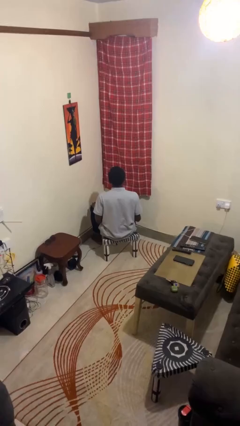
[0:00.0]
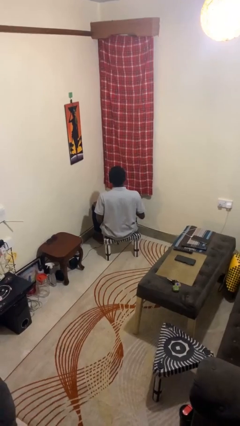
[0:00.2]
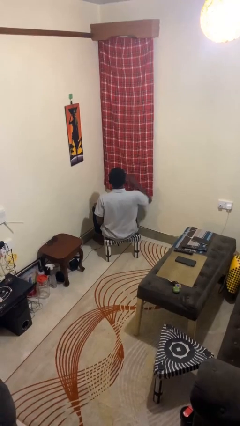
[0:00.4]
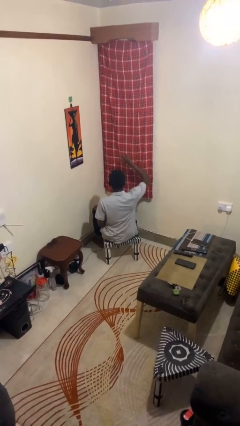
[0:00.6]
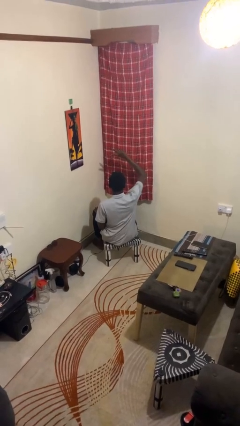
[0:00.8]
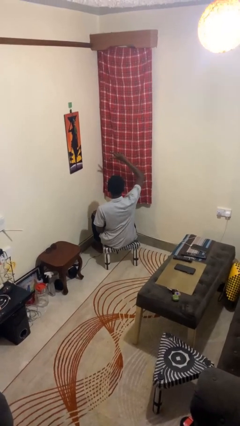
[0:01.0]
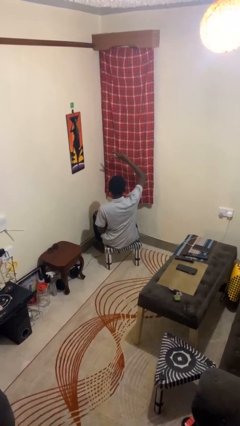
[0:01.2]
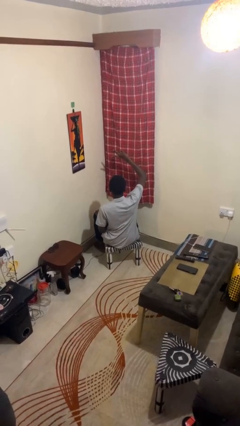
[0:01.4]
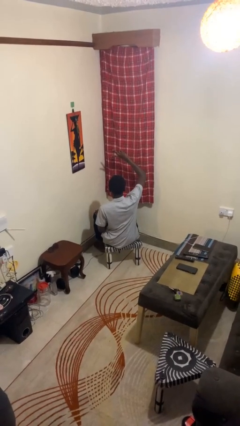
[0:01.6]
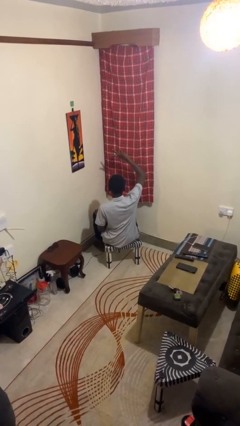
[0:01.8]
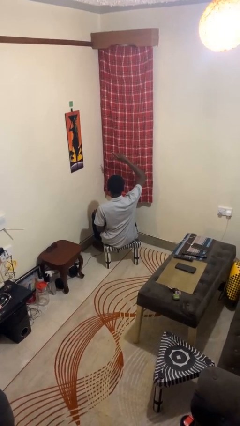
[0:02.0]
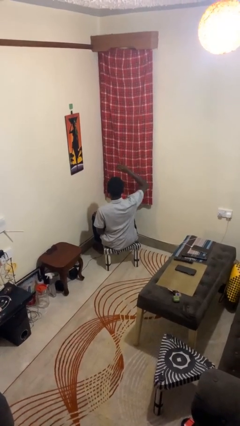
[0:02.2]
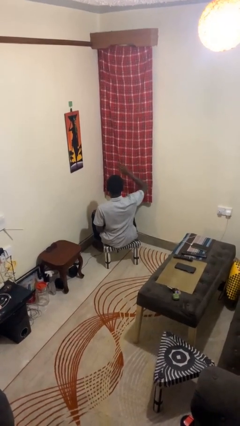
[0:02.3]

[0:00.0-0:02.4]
person gestures peace

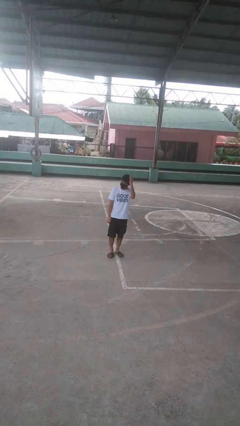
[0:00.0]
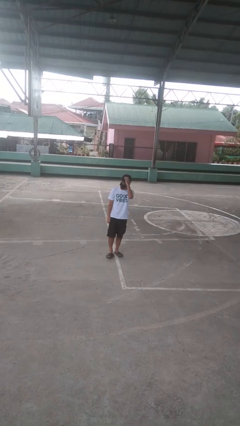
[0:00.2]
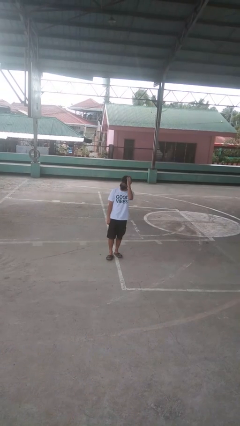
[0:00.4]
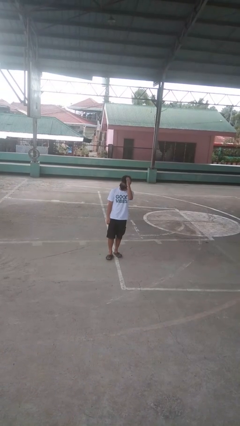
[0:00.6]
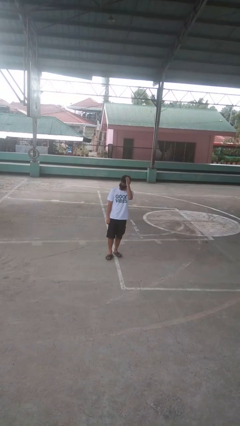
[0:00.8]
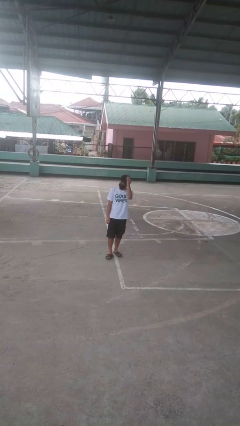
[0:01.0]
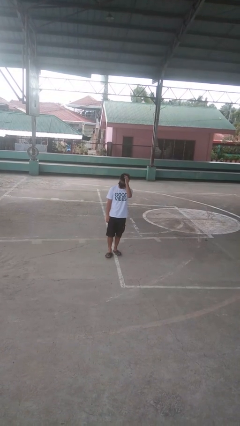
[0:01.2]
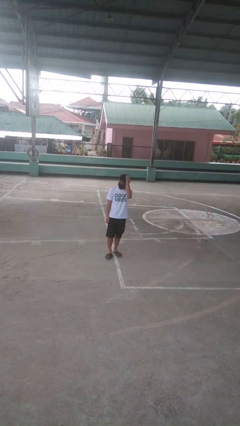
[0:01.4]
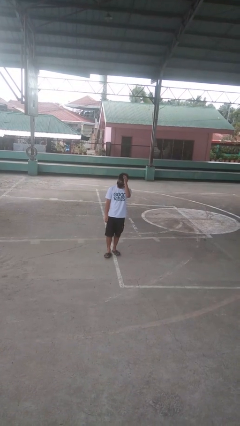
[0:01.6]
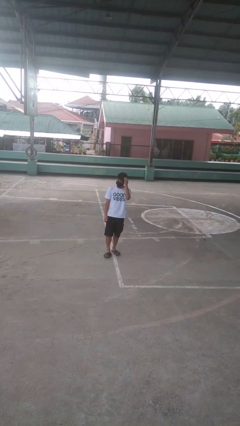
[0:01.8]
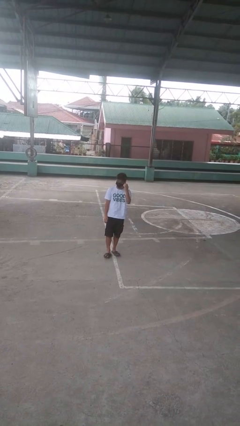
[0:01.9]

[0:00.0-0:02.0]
person pats head

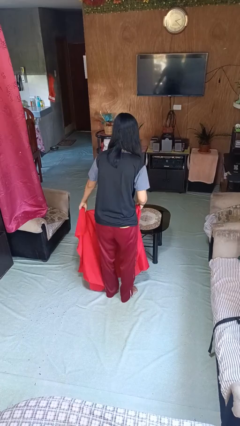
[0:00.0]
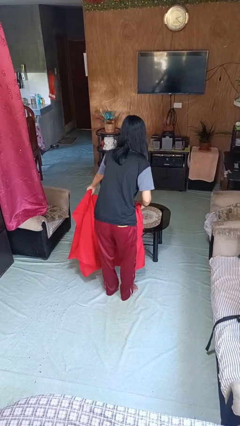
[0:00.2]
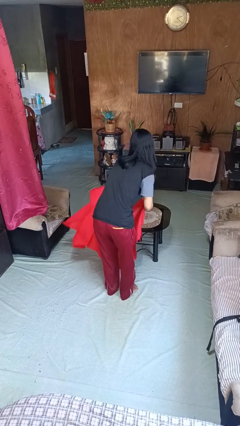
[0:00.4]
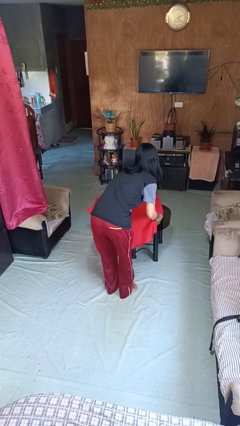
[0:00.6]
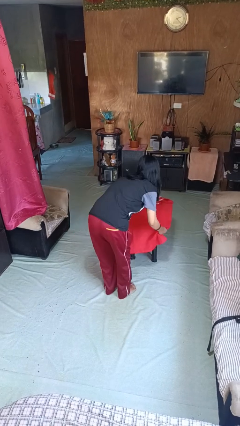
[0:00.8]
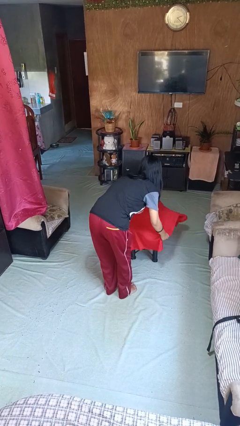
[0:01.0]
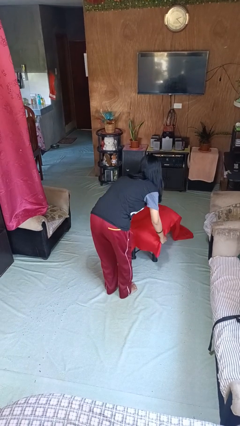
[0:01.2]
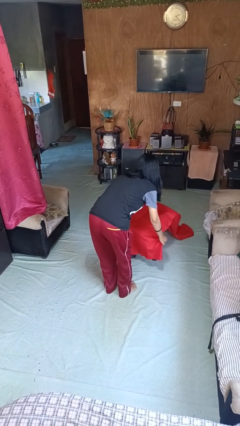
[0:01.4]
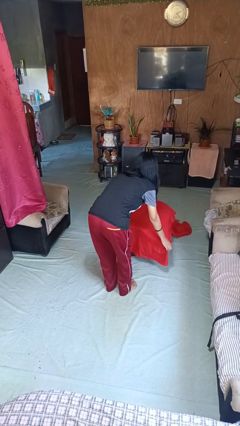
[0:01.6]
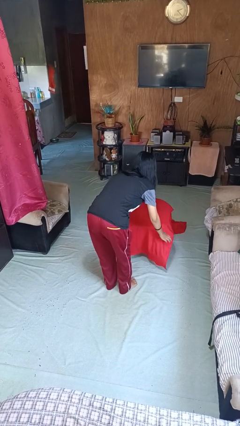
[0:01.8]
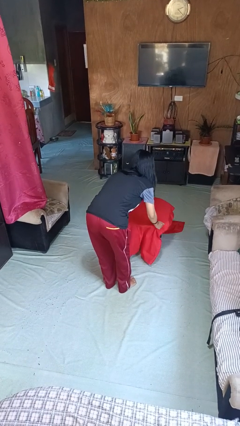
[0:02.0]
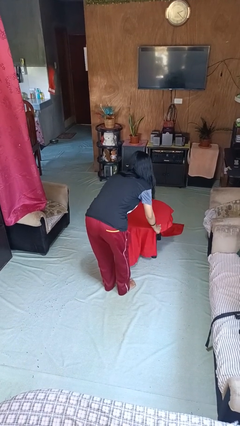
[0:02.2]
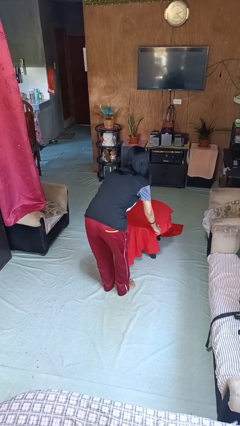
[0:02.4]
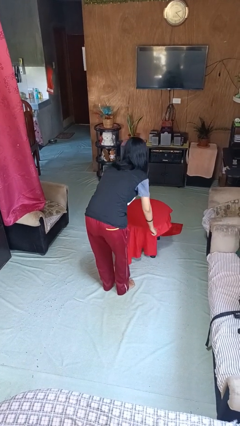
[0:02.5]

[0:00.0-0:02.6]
person spreads tablecloth

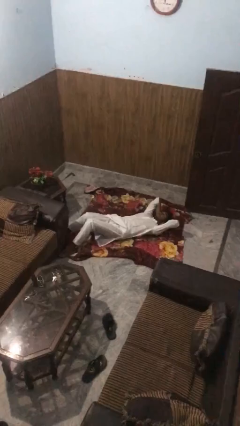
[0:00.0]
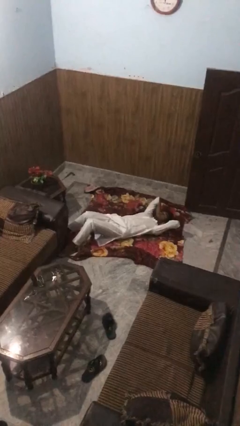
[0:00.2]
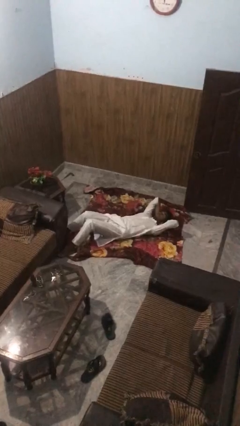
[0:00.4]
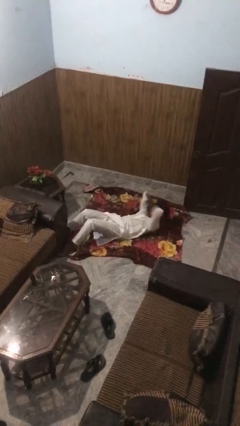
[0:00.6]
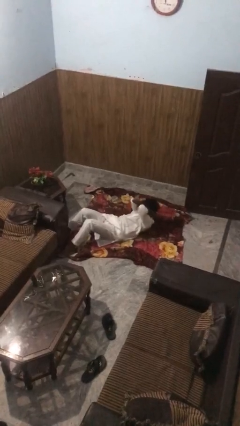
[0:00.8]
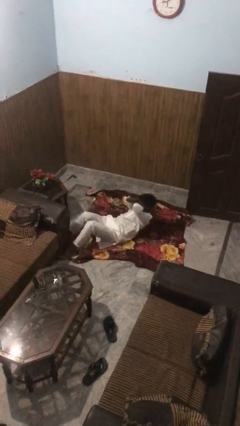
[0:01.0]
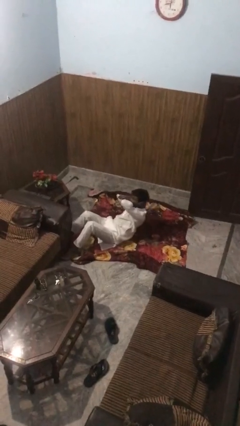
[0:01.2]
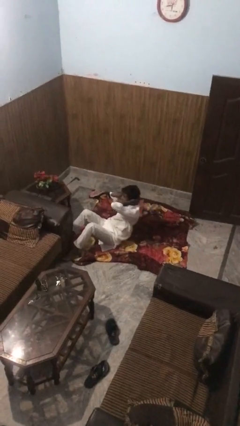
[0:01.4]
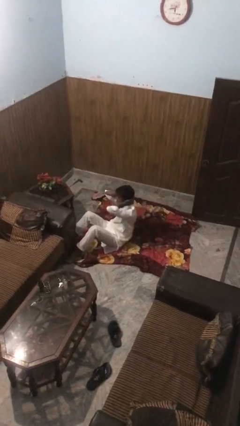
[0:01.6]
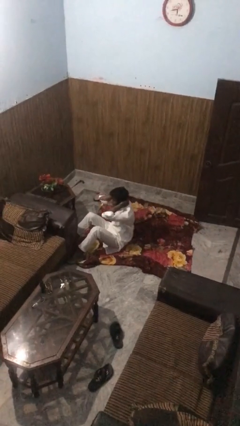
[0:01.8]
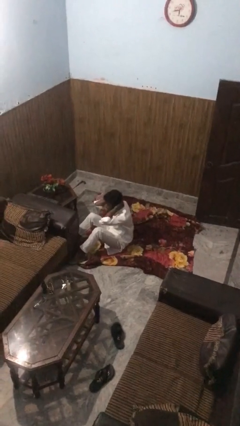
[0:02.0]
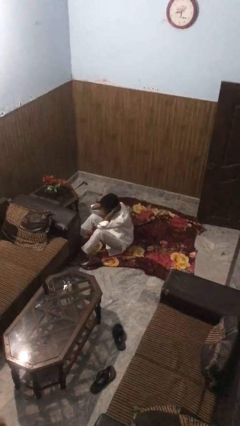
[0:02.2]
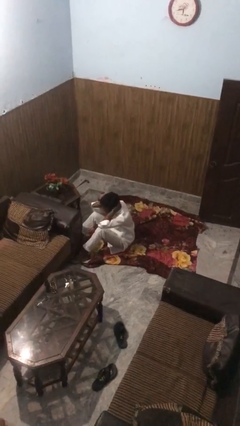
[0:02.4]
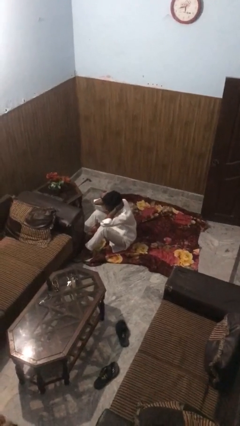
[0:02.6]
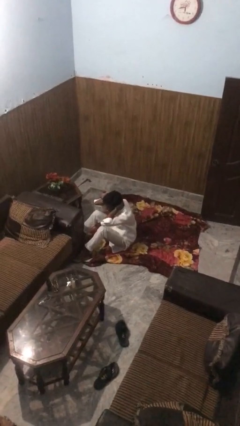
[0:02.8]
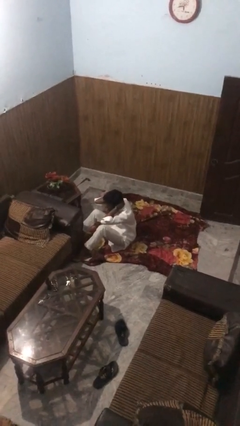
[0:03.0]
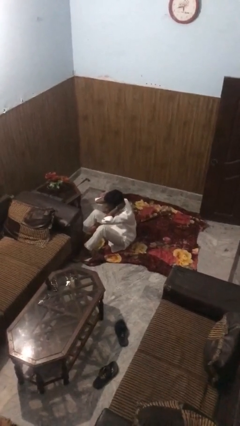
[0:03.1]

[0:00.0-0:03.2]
person exercises with situp

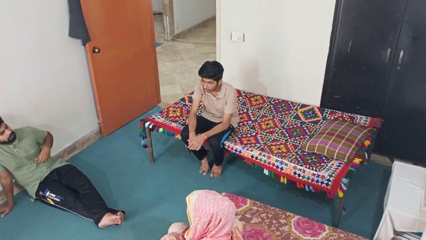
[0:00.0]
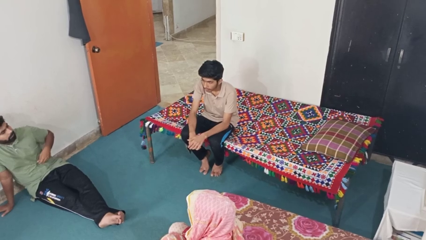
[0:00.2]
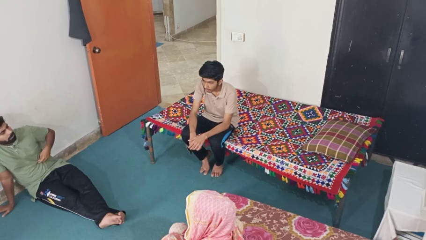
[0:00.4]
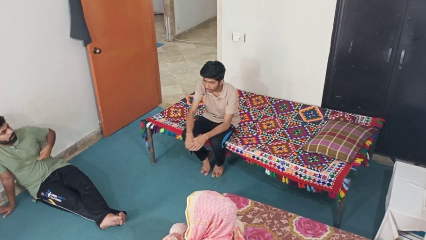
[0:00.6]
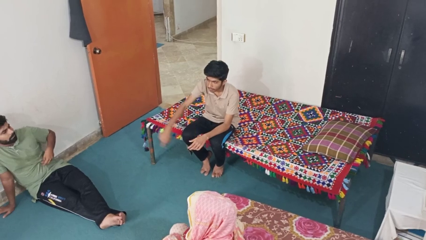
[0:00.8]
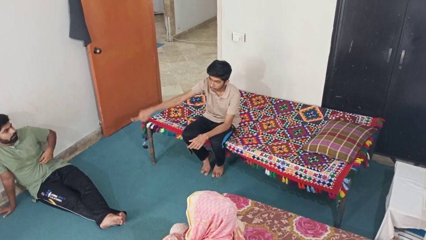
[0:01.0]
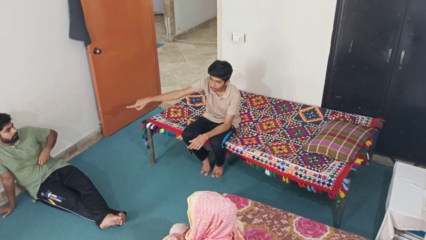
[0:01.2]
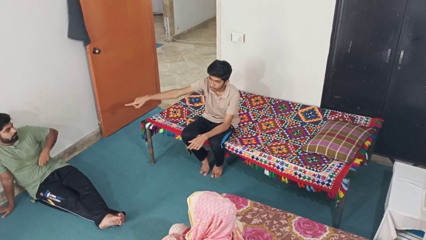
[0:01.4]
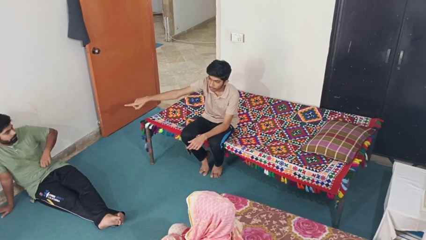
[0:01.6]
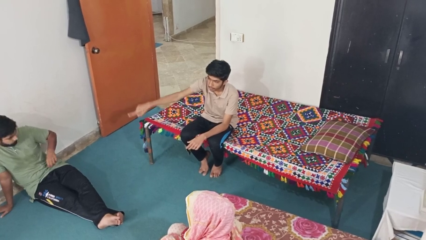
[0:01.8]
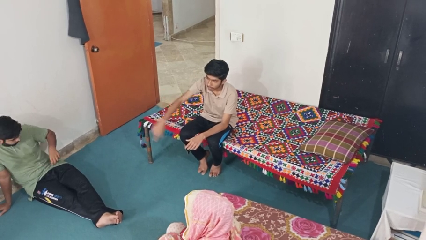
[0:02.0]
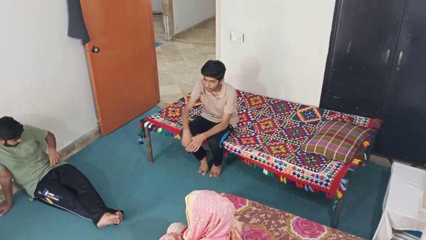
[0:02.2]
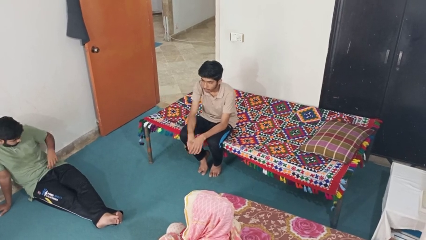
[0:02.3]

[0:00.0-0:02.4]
person points at person

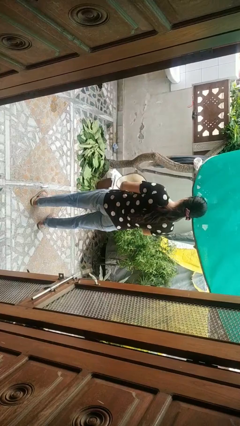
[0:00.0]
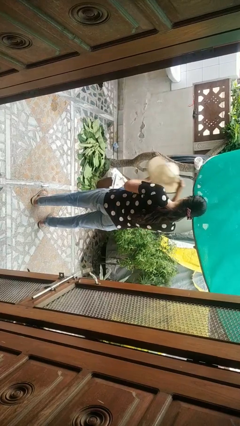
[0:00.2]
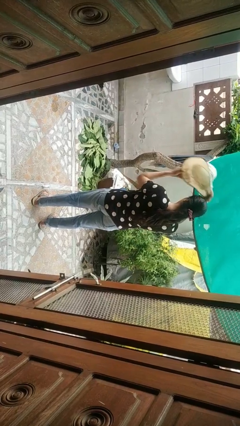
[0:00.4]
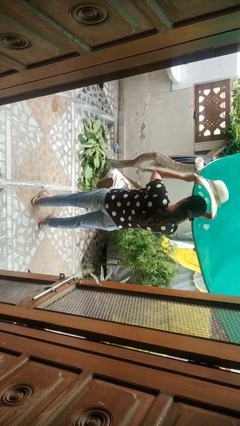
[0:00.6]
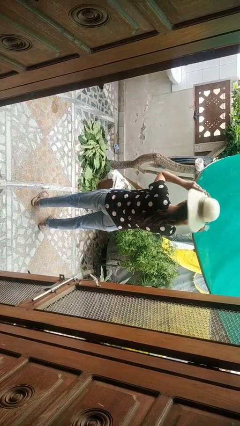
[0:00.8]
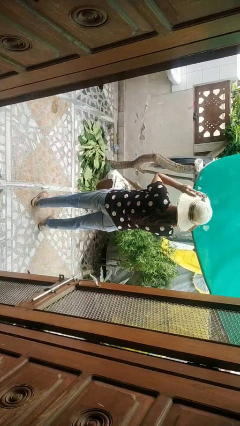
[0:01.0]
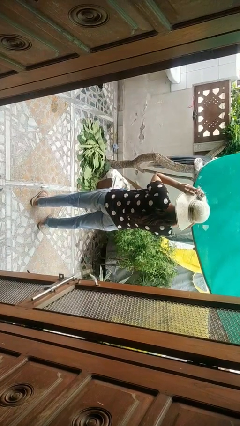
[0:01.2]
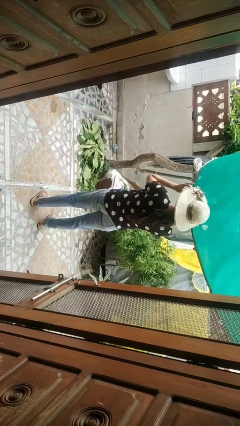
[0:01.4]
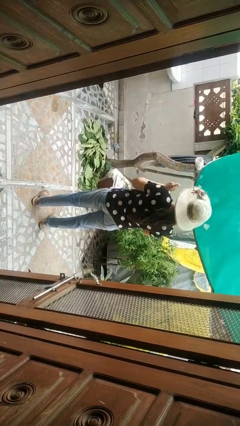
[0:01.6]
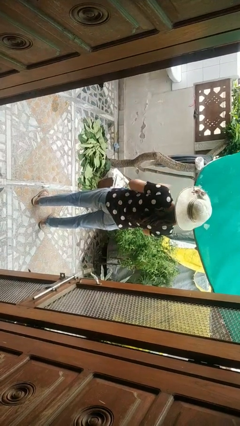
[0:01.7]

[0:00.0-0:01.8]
person puts on hat

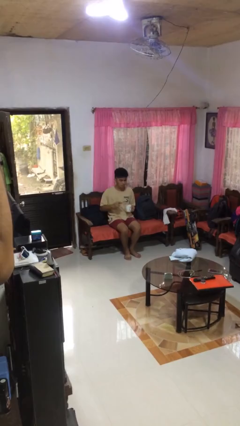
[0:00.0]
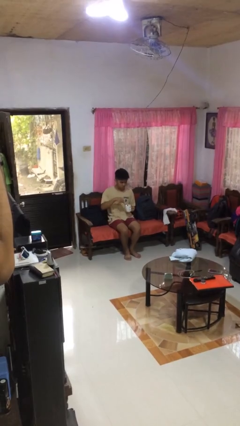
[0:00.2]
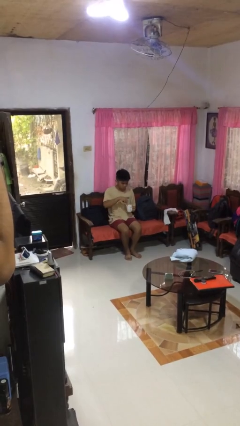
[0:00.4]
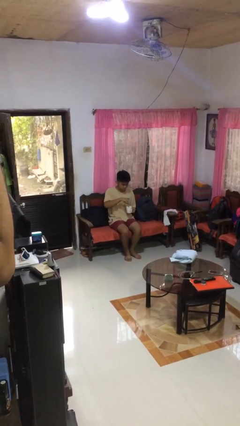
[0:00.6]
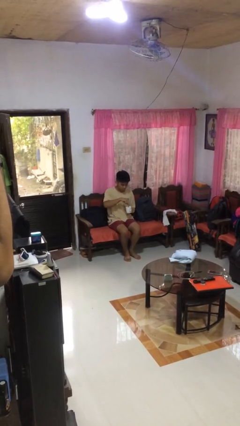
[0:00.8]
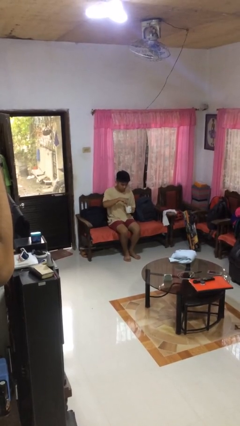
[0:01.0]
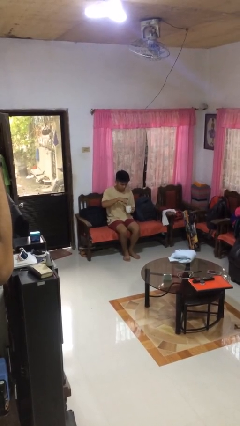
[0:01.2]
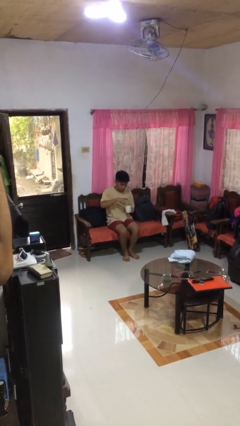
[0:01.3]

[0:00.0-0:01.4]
person stirs mug

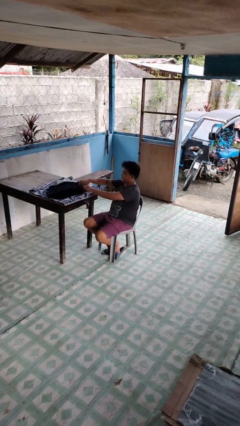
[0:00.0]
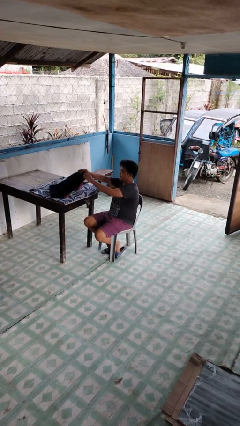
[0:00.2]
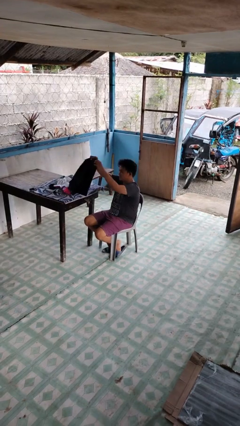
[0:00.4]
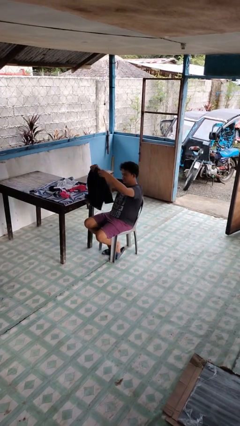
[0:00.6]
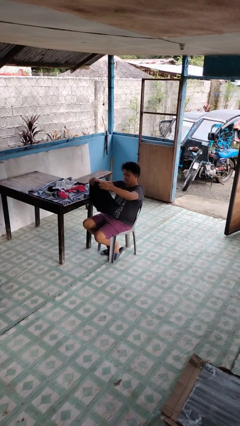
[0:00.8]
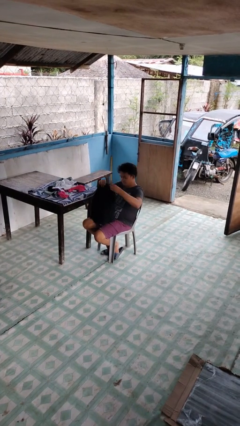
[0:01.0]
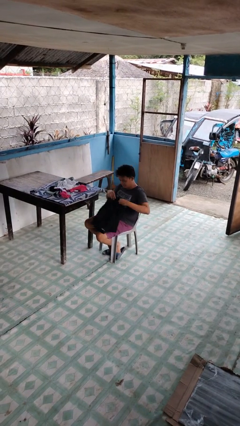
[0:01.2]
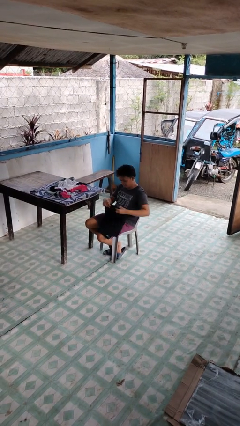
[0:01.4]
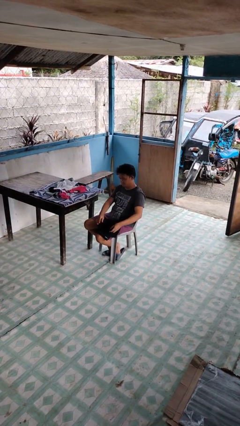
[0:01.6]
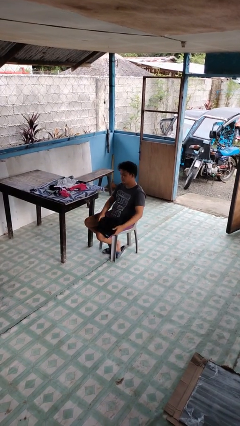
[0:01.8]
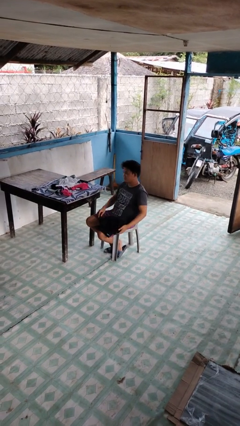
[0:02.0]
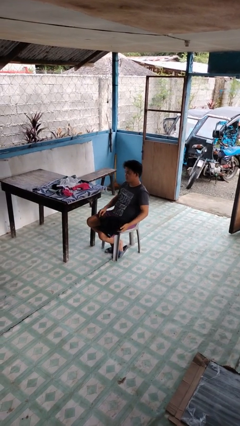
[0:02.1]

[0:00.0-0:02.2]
person folds pants
